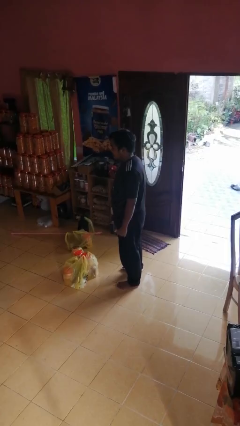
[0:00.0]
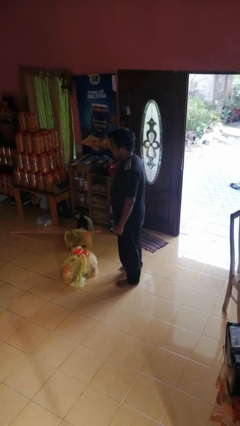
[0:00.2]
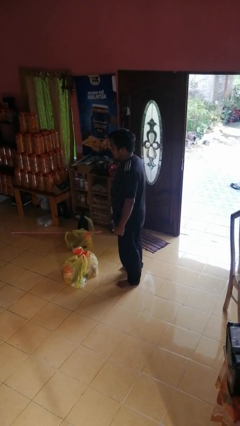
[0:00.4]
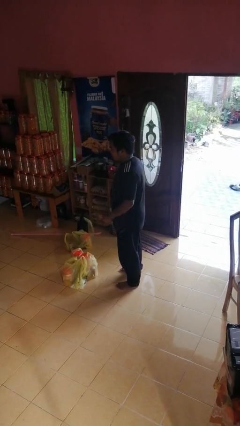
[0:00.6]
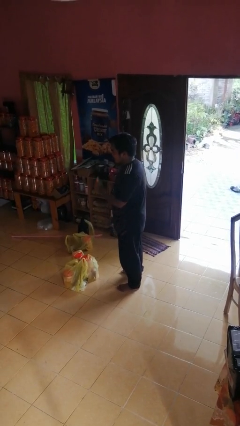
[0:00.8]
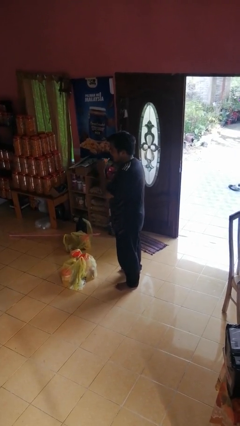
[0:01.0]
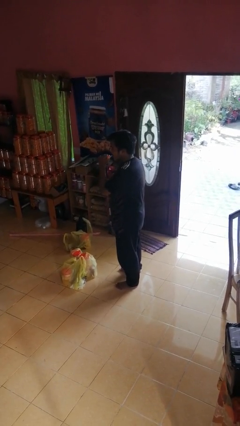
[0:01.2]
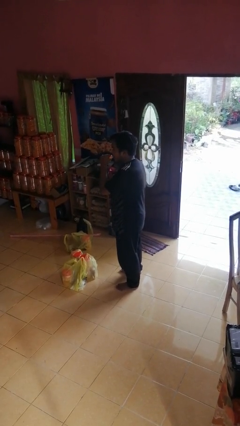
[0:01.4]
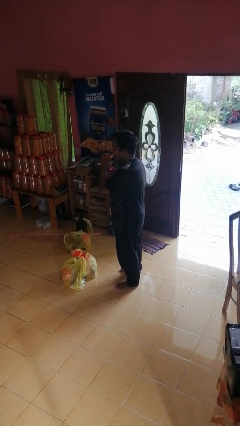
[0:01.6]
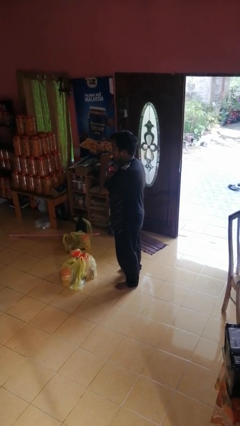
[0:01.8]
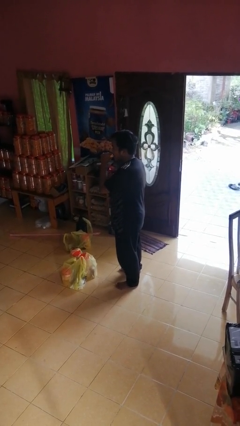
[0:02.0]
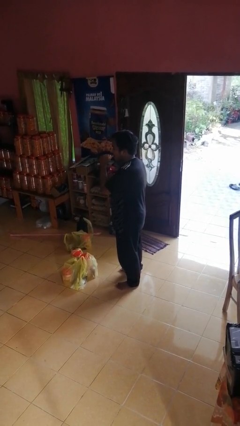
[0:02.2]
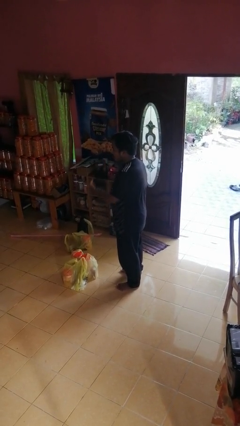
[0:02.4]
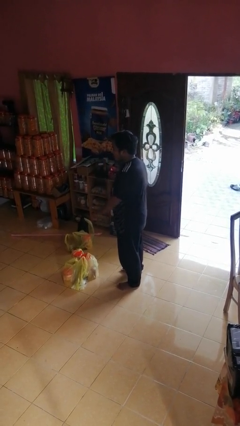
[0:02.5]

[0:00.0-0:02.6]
person eats banana

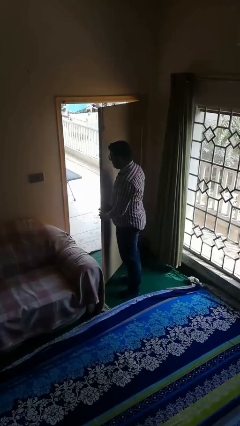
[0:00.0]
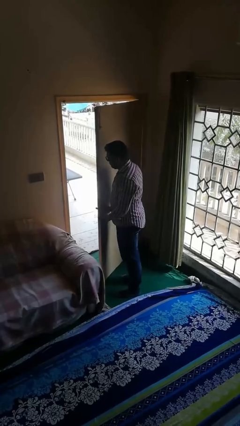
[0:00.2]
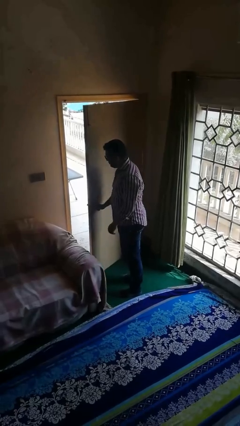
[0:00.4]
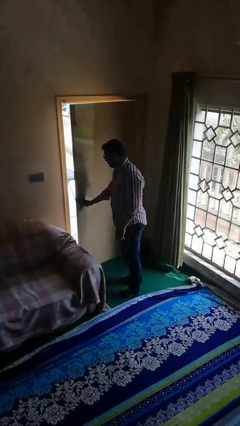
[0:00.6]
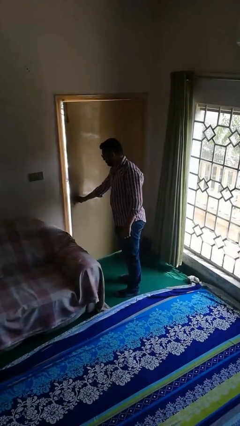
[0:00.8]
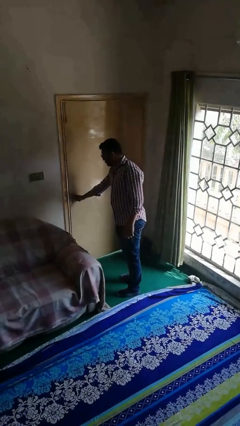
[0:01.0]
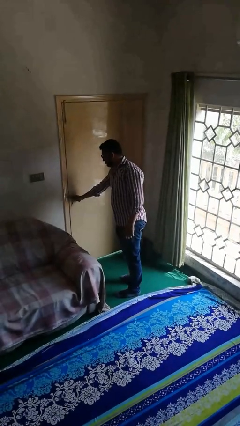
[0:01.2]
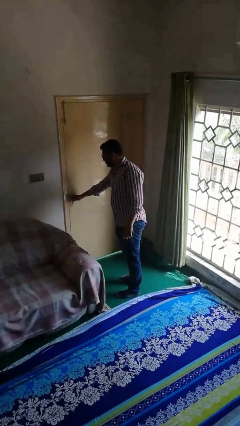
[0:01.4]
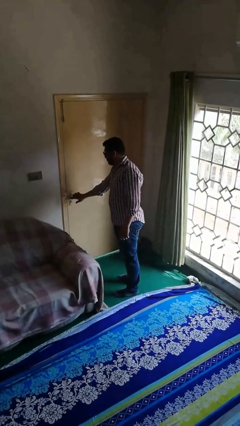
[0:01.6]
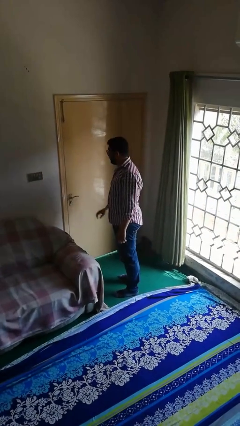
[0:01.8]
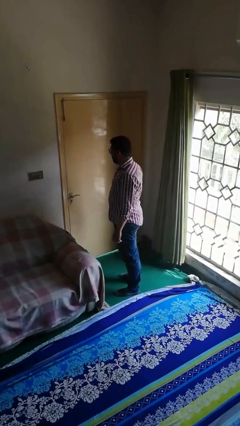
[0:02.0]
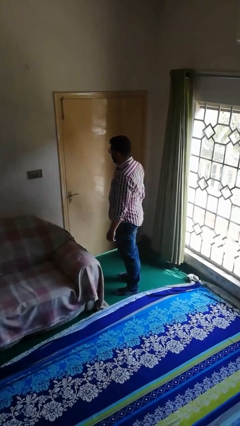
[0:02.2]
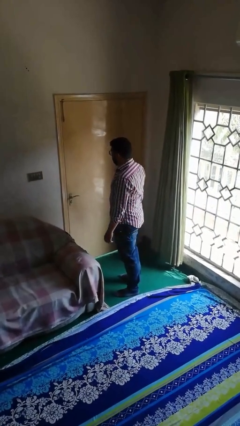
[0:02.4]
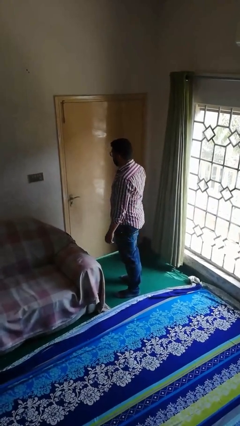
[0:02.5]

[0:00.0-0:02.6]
person closes facility door

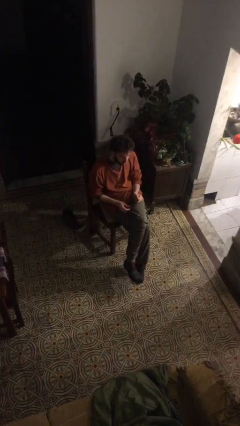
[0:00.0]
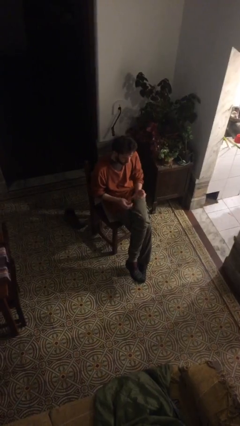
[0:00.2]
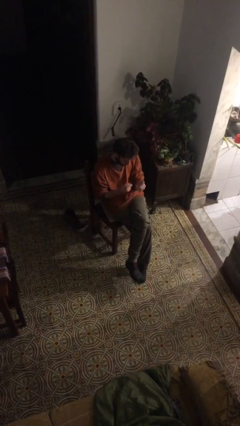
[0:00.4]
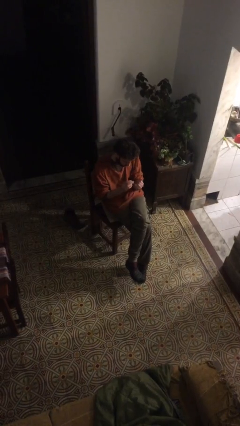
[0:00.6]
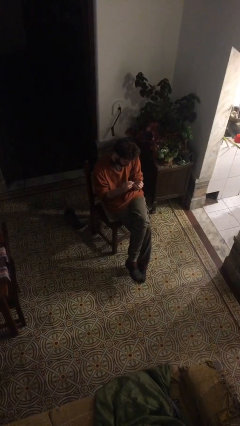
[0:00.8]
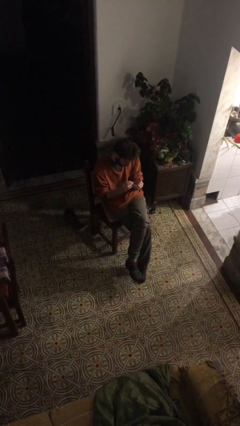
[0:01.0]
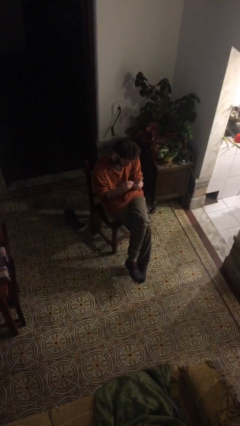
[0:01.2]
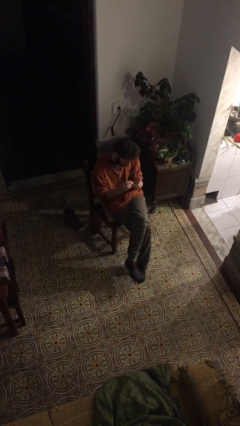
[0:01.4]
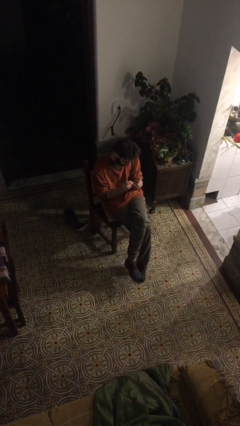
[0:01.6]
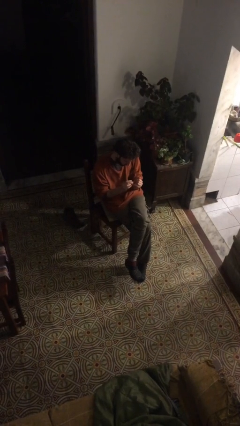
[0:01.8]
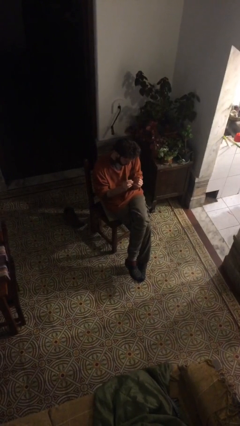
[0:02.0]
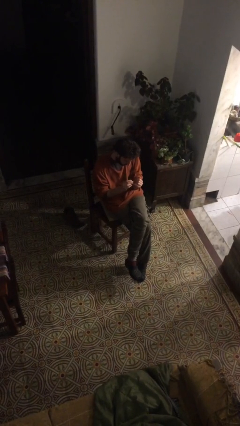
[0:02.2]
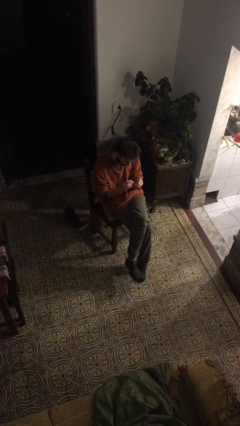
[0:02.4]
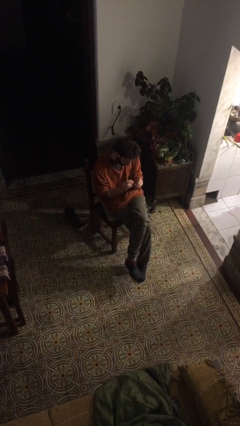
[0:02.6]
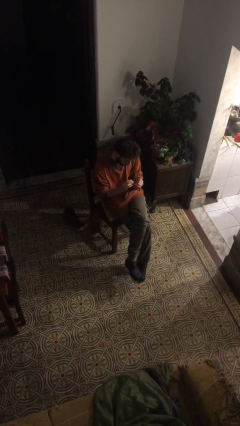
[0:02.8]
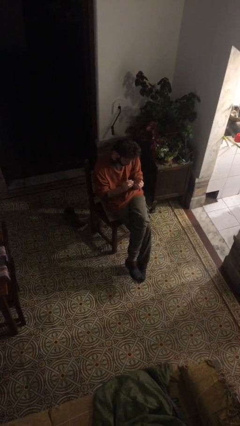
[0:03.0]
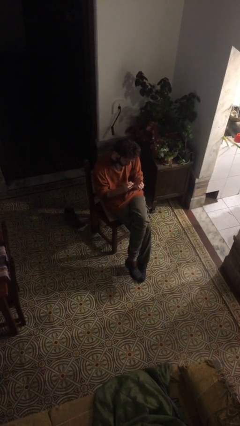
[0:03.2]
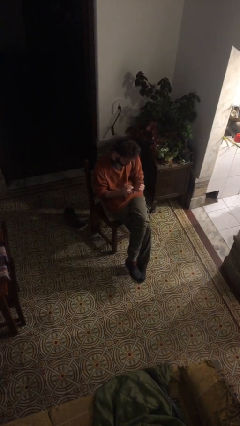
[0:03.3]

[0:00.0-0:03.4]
person clips fingernails

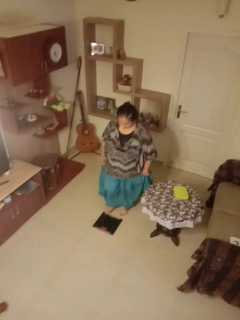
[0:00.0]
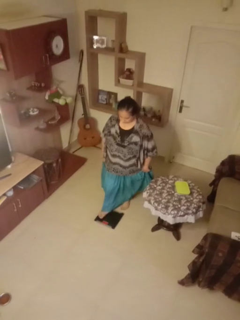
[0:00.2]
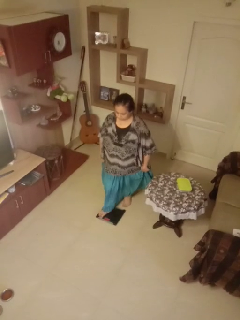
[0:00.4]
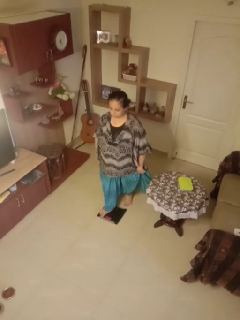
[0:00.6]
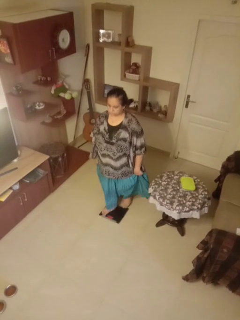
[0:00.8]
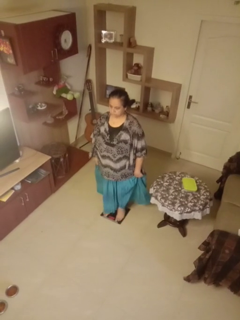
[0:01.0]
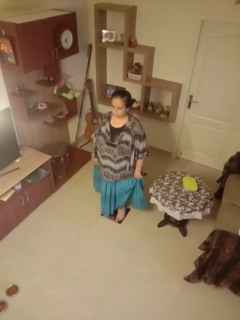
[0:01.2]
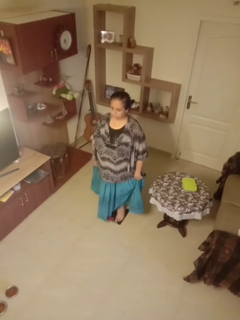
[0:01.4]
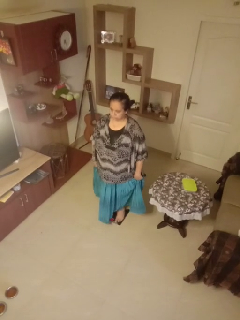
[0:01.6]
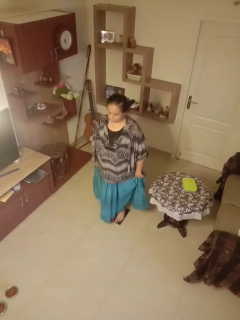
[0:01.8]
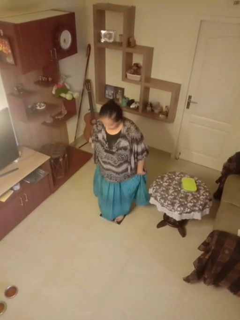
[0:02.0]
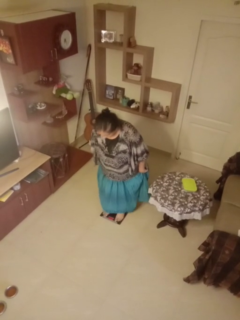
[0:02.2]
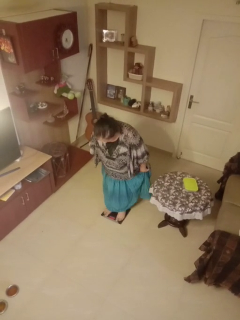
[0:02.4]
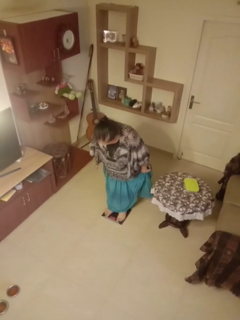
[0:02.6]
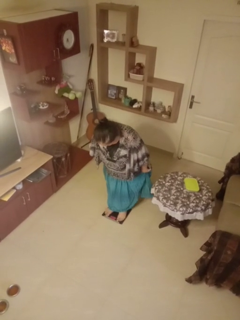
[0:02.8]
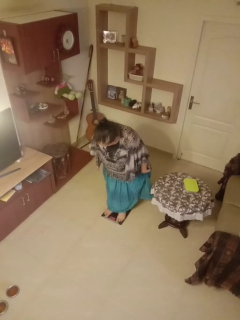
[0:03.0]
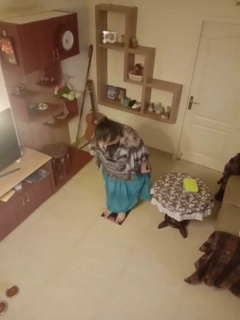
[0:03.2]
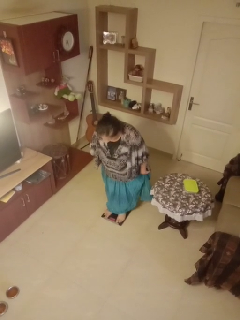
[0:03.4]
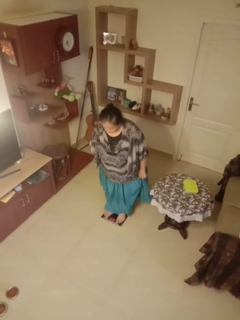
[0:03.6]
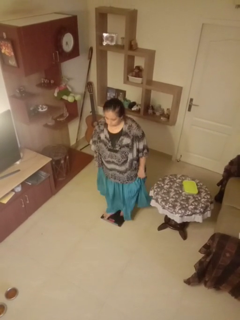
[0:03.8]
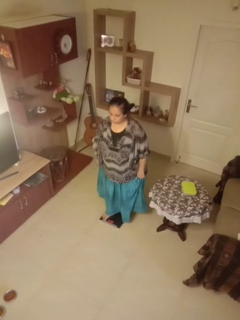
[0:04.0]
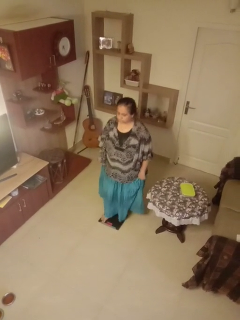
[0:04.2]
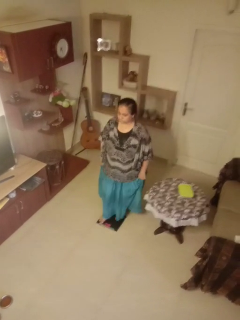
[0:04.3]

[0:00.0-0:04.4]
person uses bodyweight scale

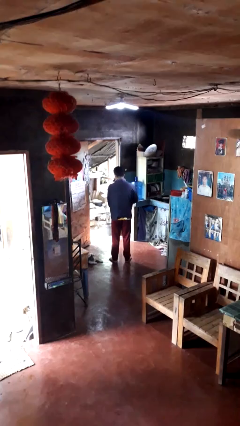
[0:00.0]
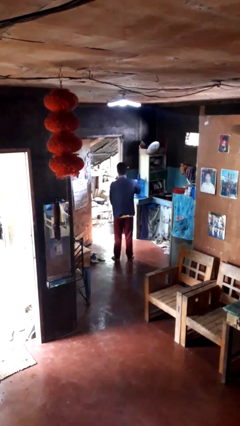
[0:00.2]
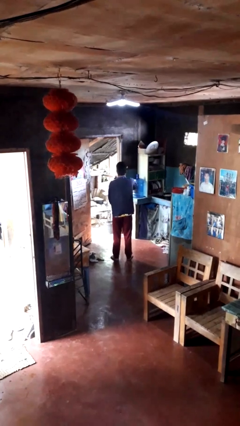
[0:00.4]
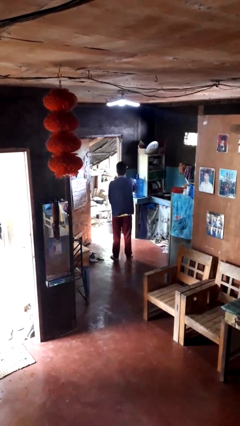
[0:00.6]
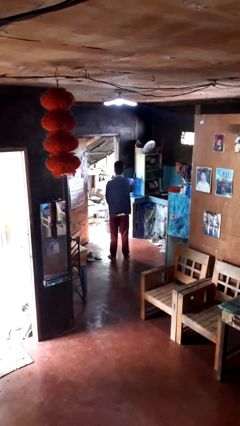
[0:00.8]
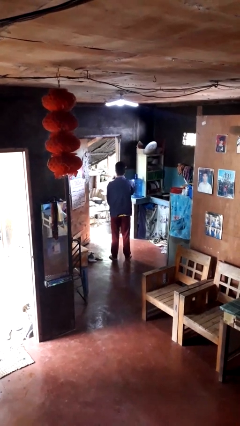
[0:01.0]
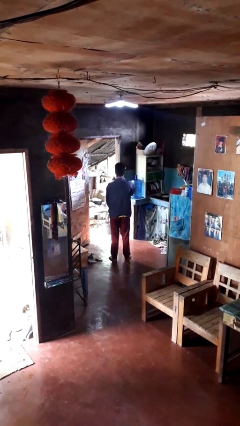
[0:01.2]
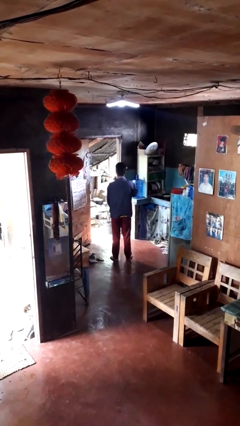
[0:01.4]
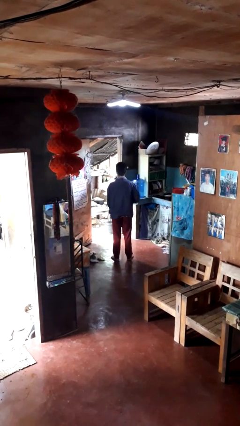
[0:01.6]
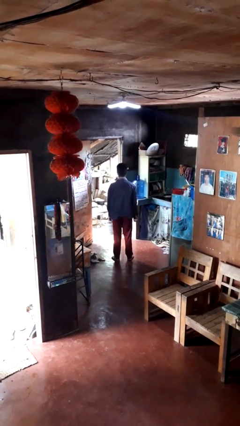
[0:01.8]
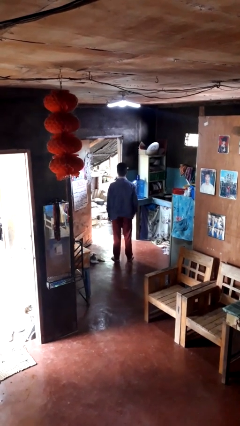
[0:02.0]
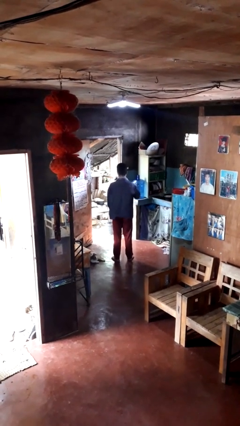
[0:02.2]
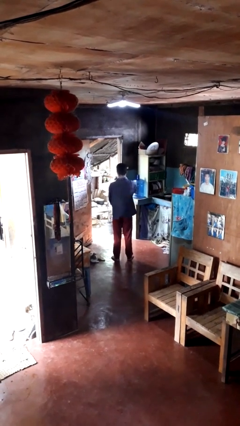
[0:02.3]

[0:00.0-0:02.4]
person zips up jacket

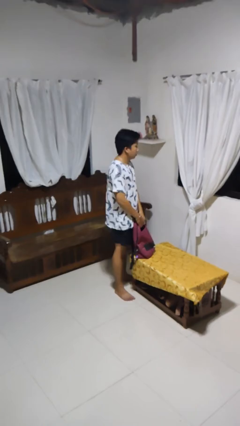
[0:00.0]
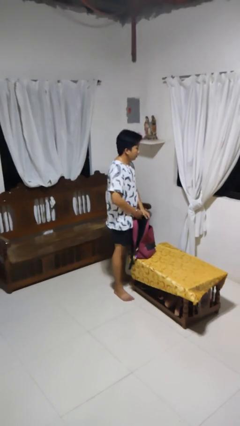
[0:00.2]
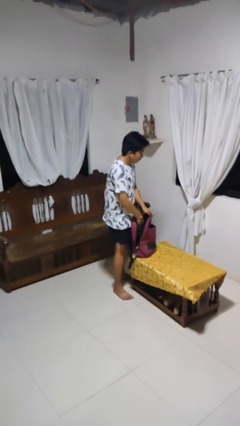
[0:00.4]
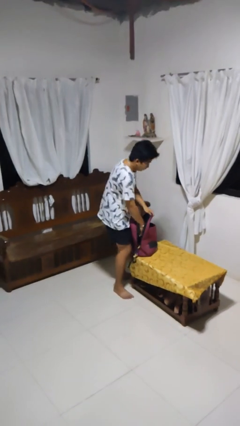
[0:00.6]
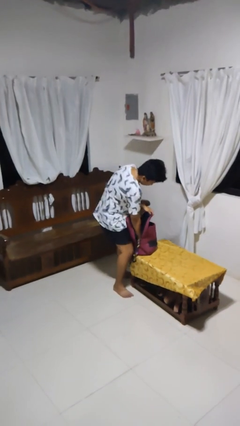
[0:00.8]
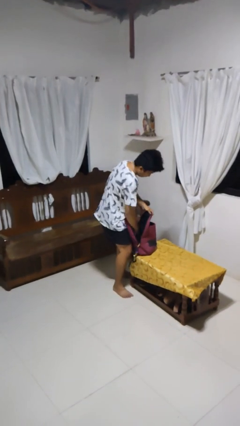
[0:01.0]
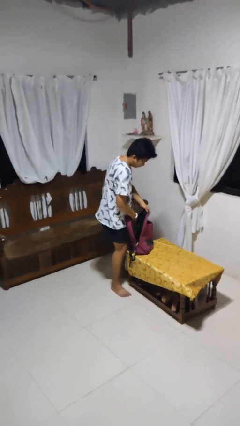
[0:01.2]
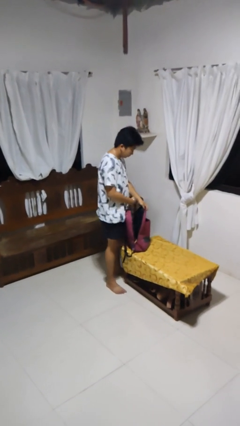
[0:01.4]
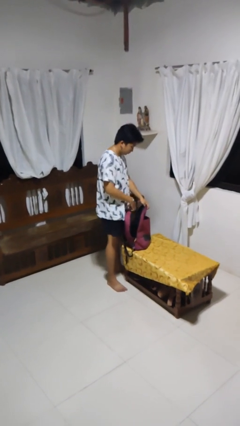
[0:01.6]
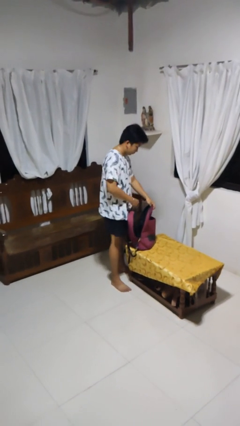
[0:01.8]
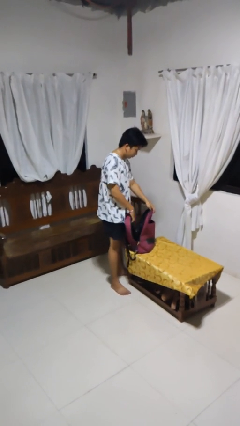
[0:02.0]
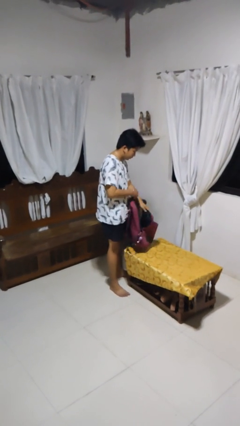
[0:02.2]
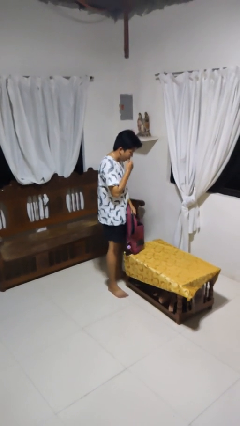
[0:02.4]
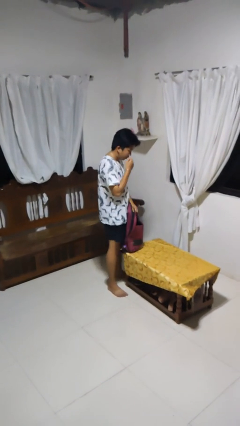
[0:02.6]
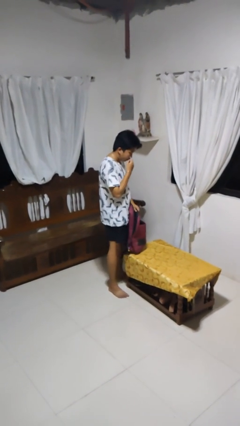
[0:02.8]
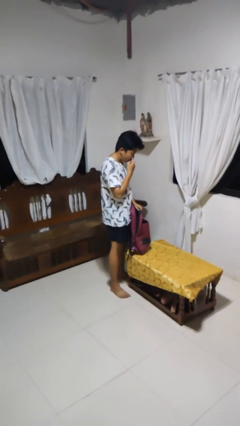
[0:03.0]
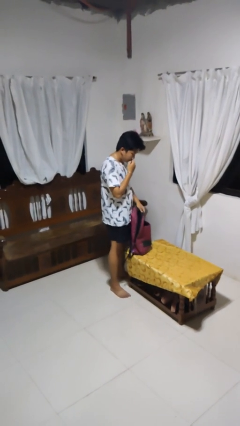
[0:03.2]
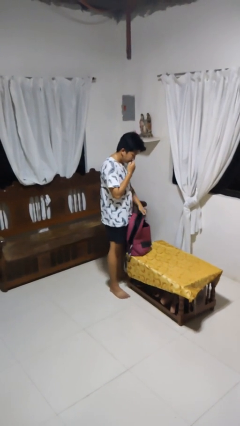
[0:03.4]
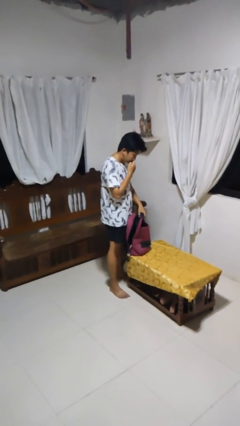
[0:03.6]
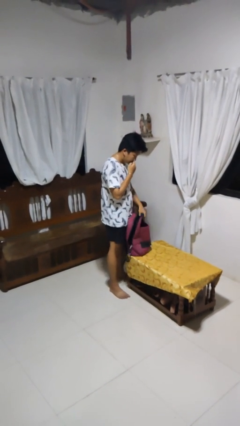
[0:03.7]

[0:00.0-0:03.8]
person eats snack from bag
